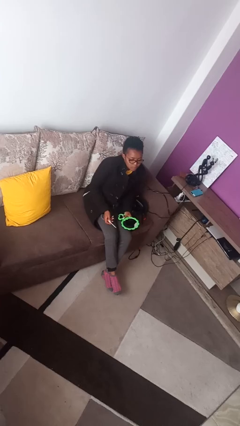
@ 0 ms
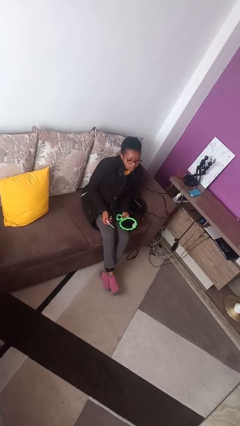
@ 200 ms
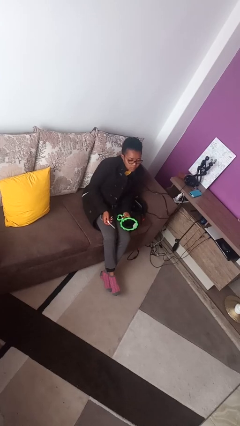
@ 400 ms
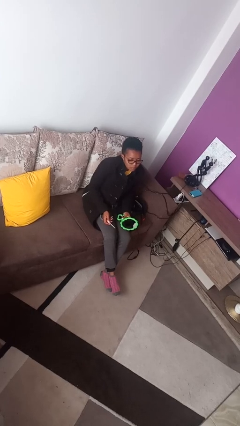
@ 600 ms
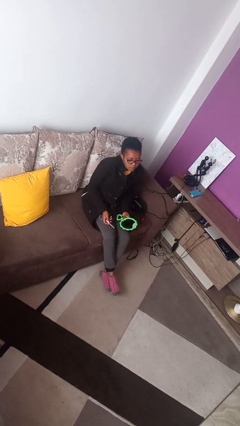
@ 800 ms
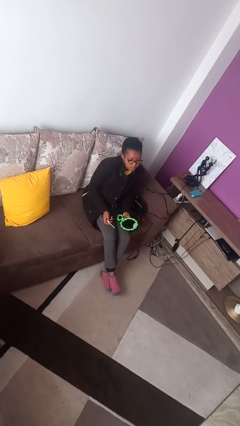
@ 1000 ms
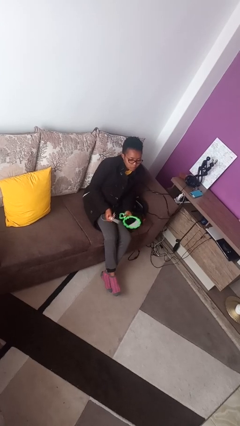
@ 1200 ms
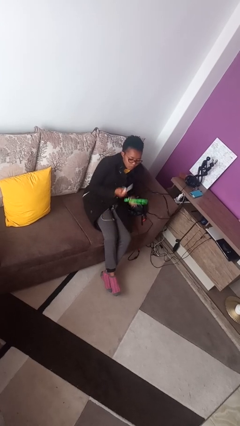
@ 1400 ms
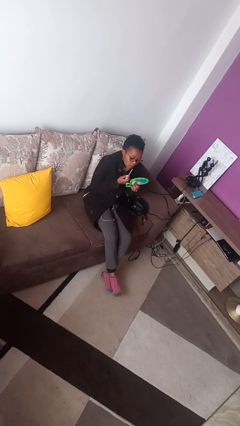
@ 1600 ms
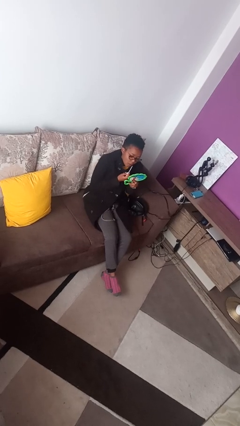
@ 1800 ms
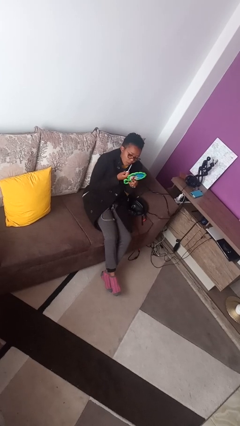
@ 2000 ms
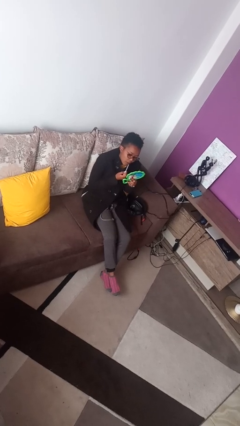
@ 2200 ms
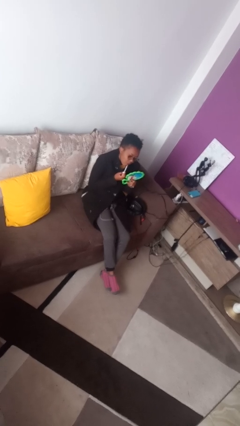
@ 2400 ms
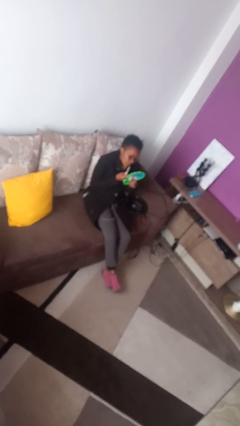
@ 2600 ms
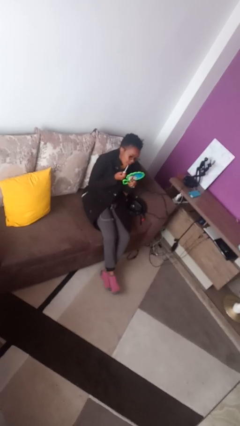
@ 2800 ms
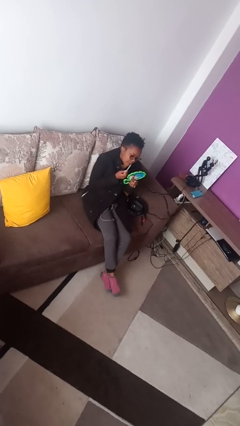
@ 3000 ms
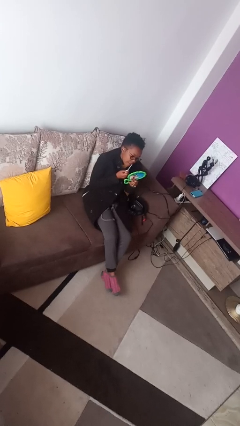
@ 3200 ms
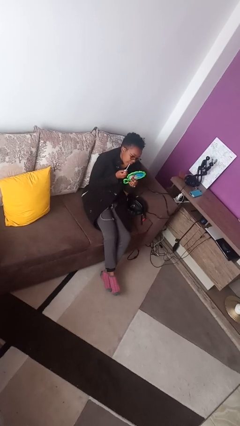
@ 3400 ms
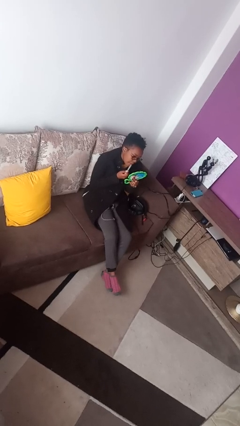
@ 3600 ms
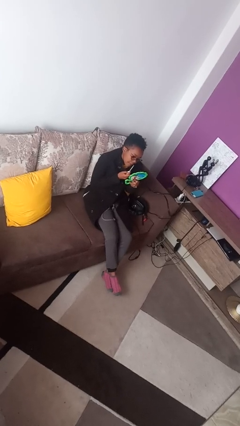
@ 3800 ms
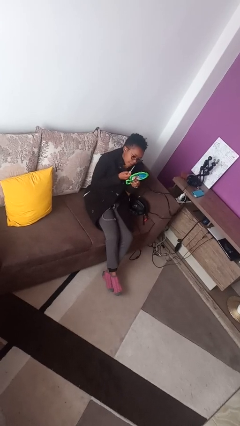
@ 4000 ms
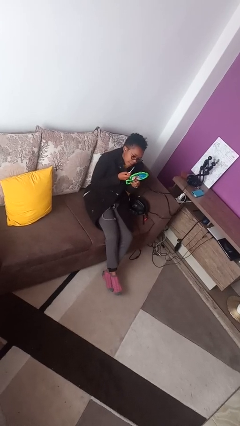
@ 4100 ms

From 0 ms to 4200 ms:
person applies lip makeup

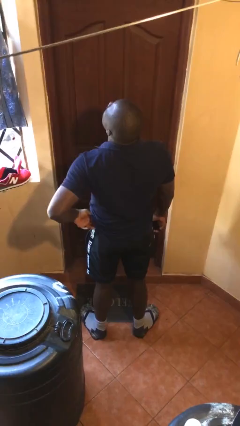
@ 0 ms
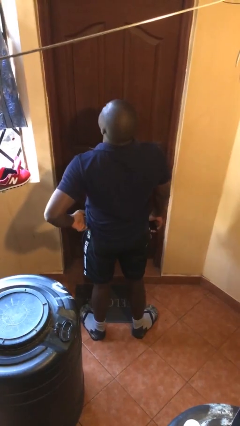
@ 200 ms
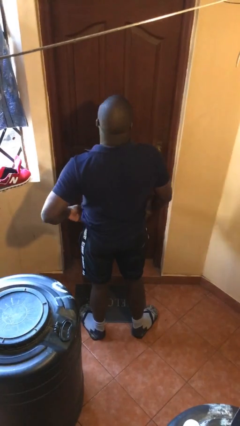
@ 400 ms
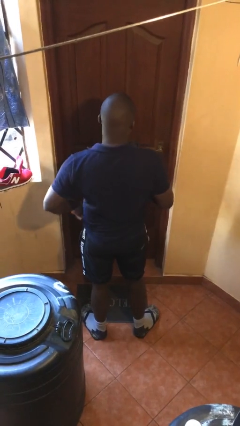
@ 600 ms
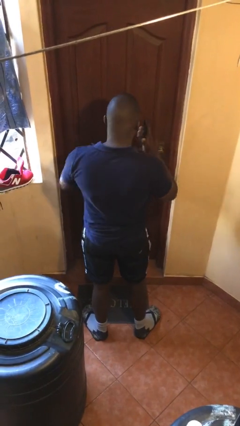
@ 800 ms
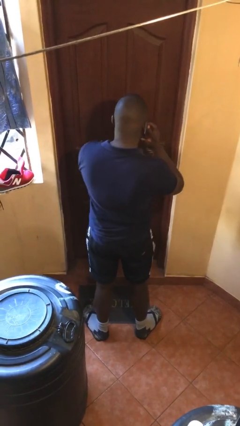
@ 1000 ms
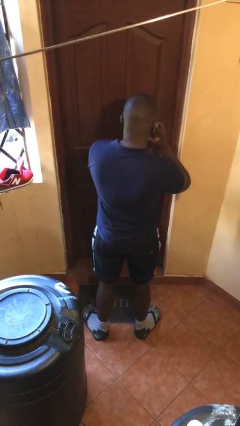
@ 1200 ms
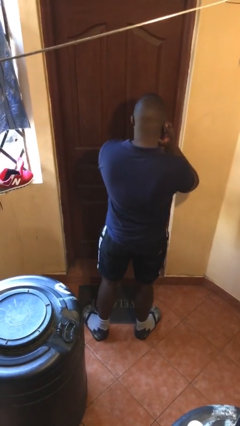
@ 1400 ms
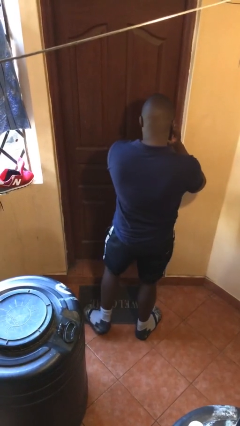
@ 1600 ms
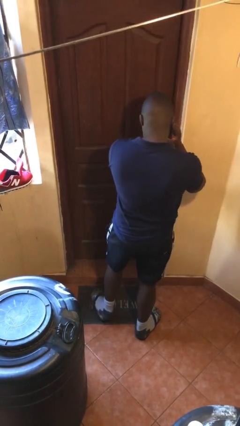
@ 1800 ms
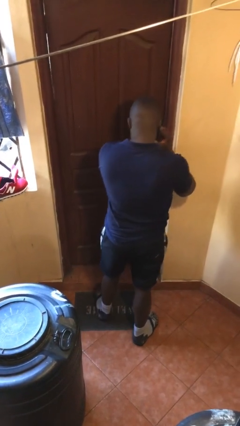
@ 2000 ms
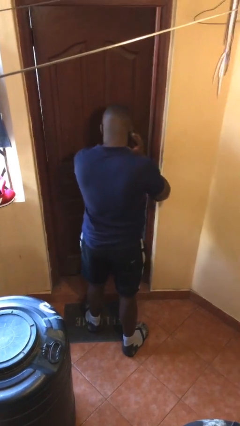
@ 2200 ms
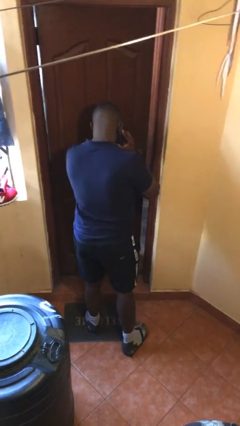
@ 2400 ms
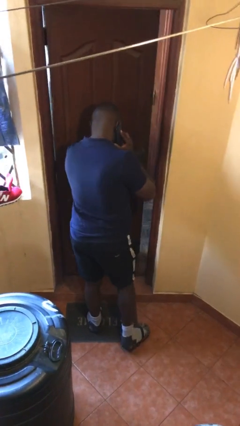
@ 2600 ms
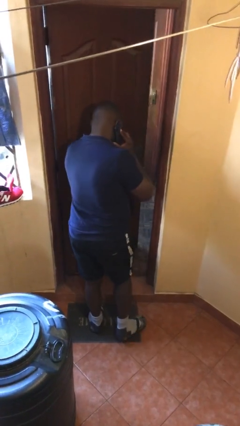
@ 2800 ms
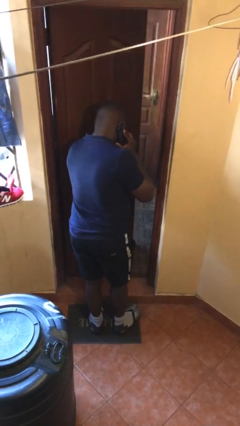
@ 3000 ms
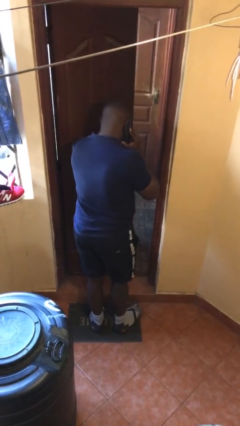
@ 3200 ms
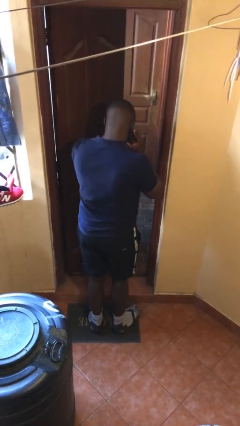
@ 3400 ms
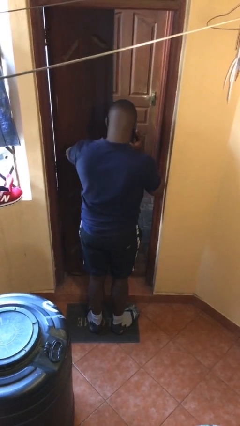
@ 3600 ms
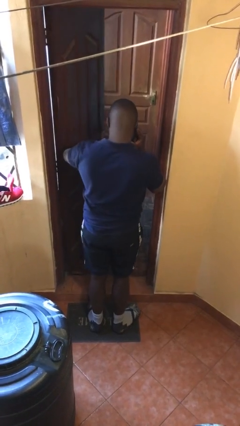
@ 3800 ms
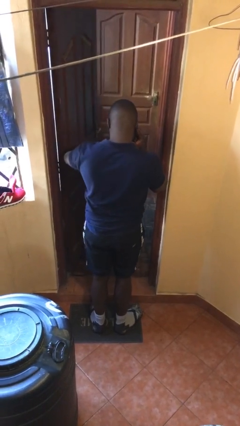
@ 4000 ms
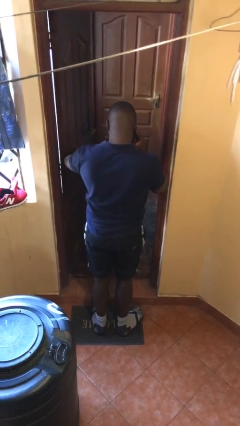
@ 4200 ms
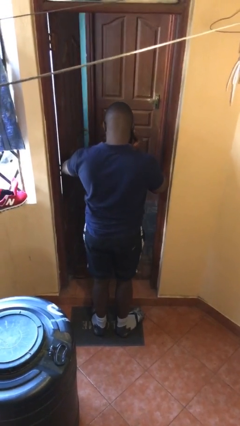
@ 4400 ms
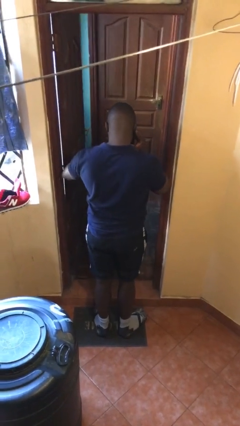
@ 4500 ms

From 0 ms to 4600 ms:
person opens facility door

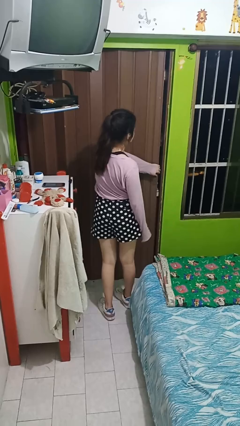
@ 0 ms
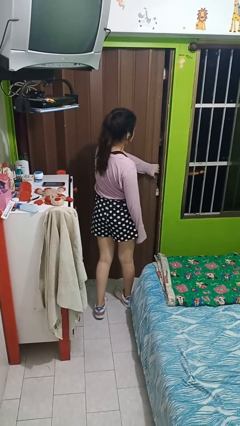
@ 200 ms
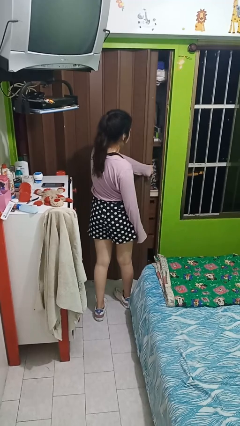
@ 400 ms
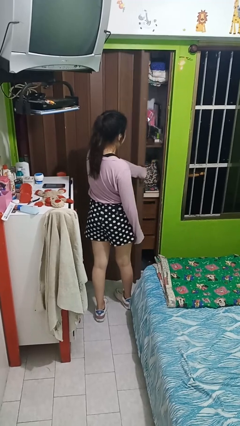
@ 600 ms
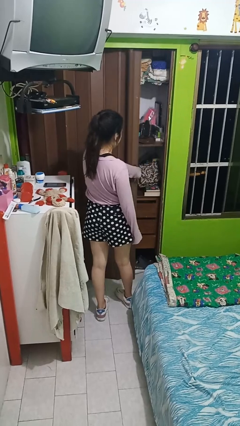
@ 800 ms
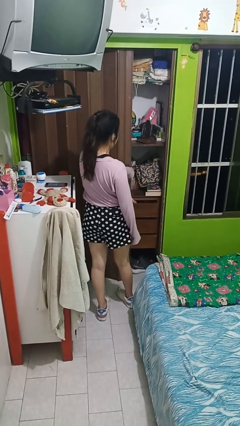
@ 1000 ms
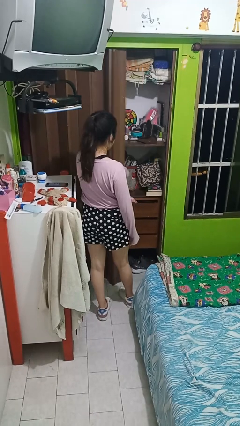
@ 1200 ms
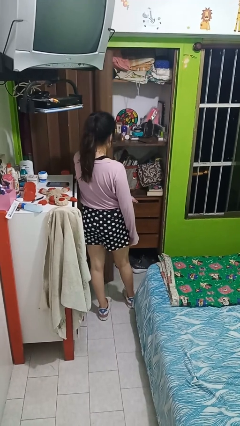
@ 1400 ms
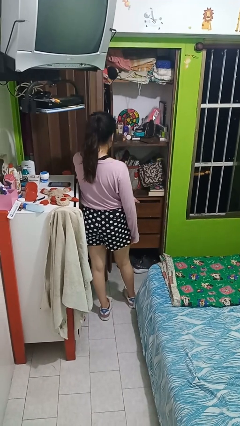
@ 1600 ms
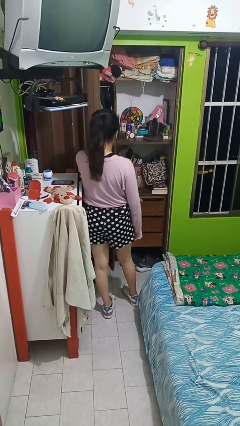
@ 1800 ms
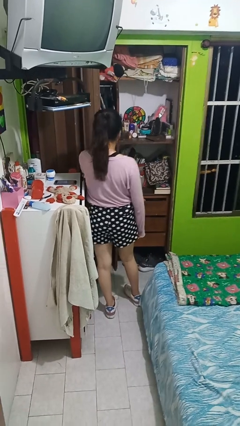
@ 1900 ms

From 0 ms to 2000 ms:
person opens sliding door

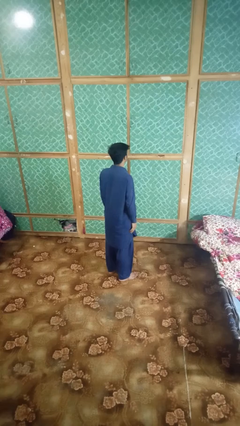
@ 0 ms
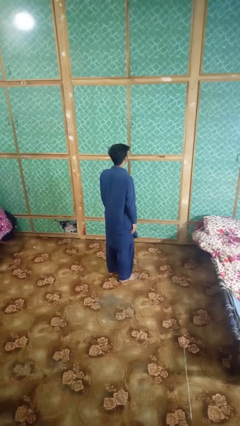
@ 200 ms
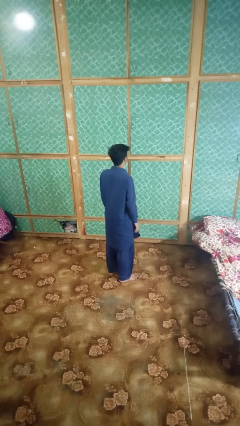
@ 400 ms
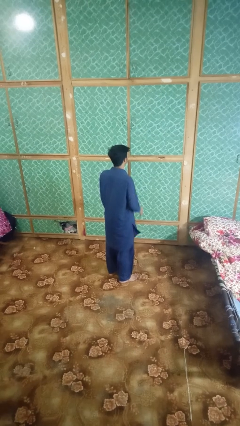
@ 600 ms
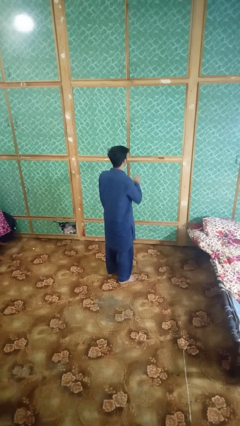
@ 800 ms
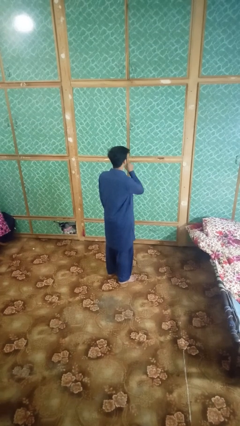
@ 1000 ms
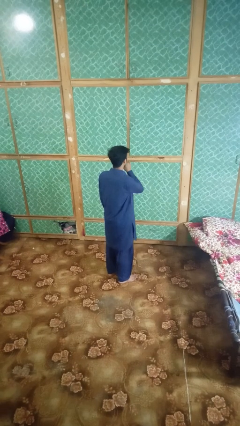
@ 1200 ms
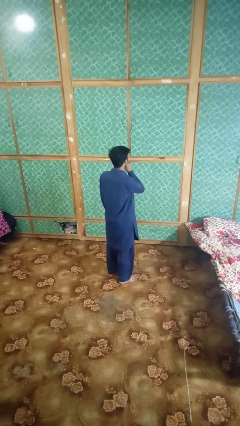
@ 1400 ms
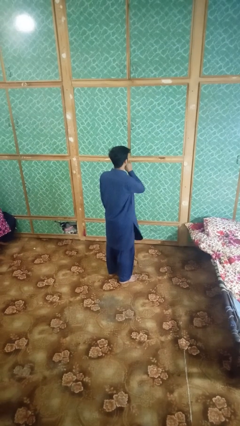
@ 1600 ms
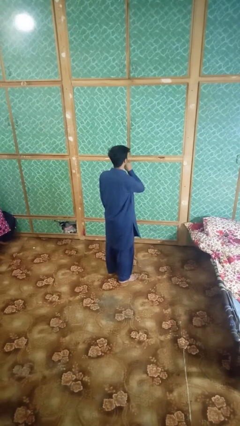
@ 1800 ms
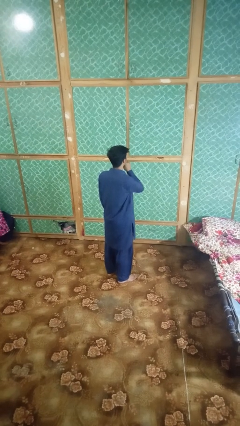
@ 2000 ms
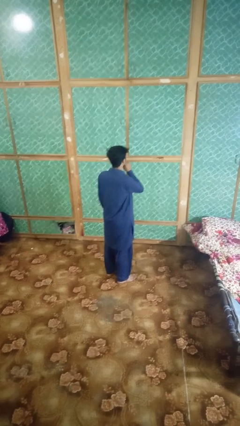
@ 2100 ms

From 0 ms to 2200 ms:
person gestures be quiet

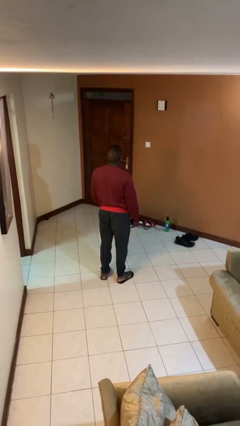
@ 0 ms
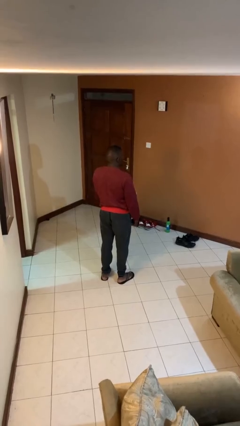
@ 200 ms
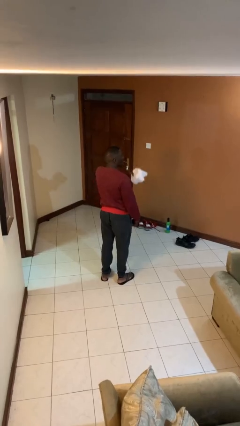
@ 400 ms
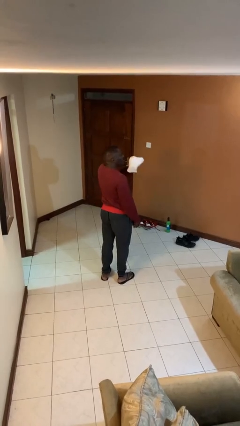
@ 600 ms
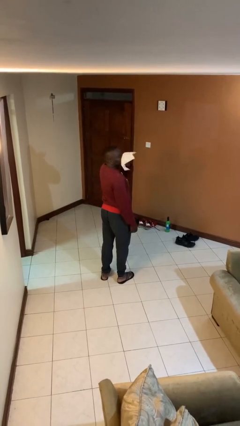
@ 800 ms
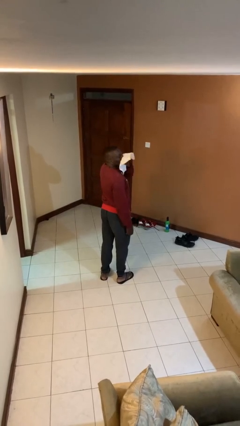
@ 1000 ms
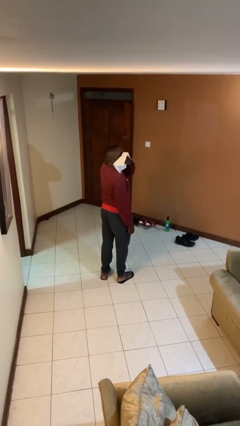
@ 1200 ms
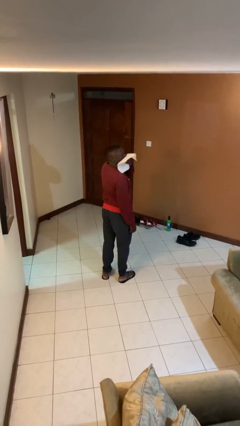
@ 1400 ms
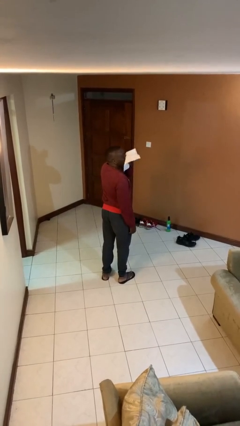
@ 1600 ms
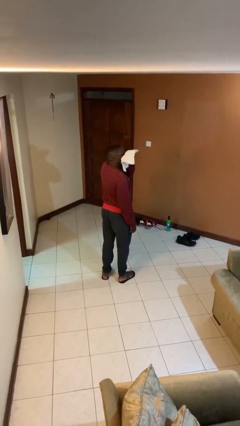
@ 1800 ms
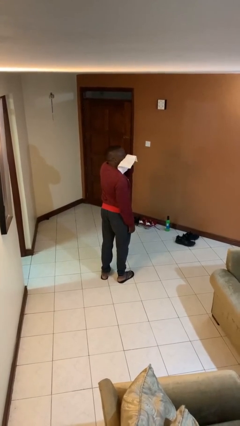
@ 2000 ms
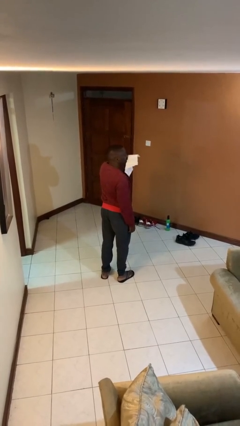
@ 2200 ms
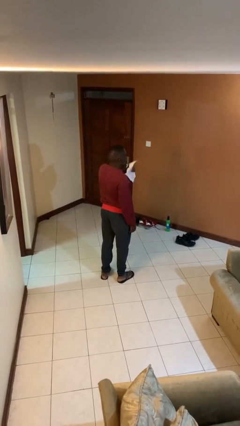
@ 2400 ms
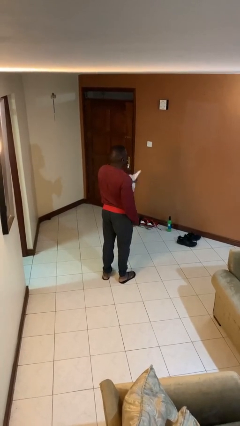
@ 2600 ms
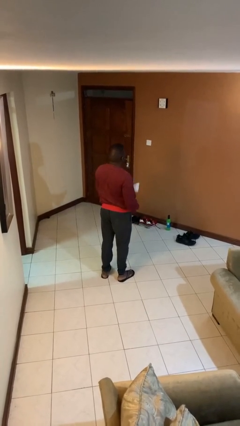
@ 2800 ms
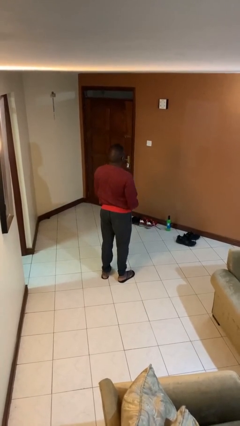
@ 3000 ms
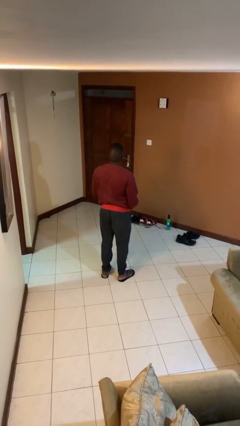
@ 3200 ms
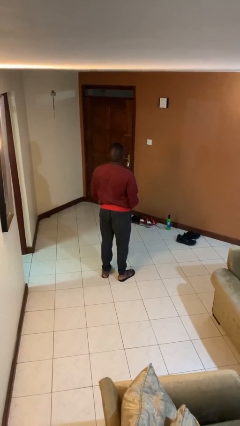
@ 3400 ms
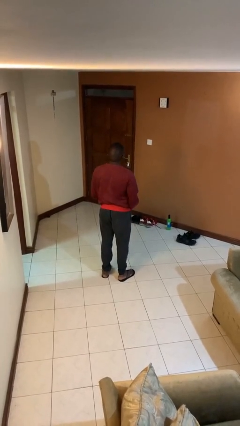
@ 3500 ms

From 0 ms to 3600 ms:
person wipes mouth with napkin

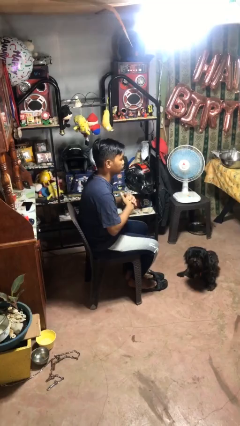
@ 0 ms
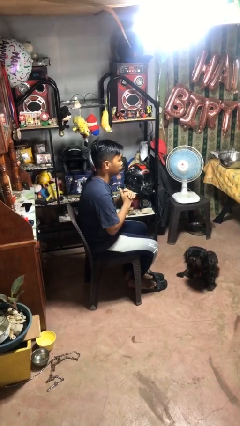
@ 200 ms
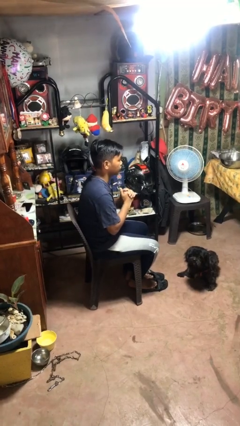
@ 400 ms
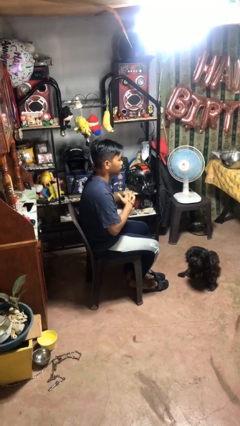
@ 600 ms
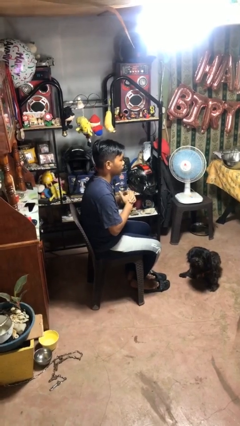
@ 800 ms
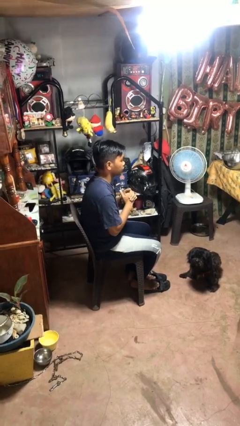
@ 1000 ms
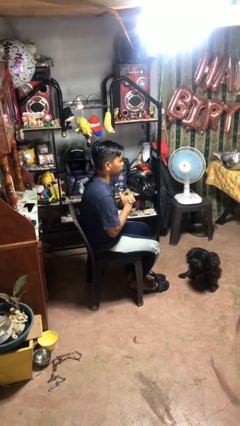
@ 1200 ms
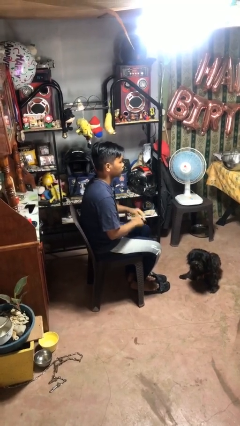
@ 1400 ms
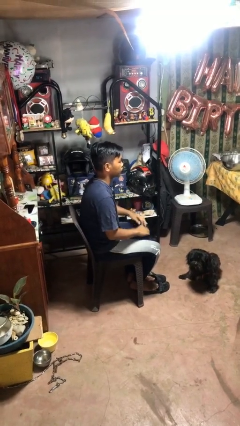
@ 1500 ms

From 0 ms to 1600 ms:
person cracks knuckles
